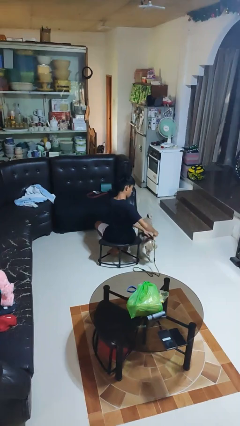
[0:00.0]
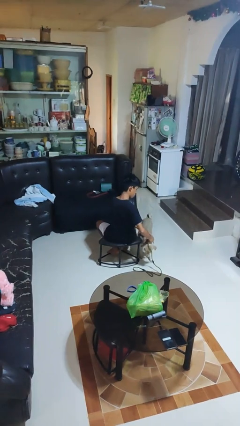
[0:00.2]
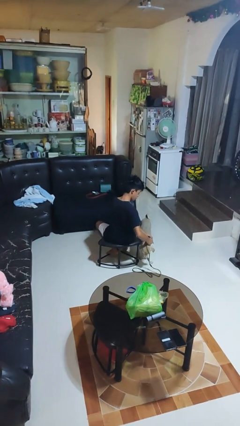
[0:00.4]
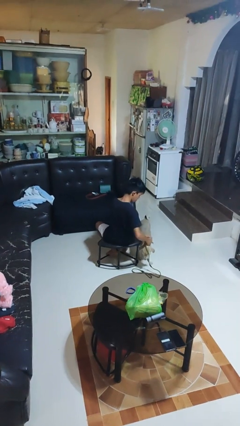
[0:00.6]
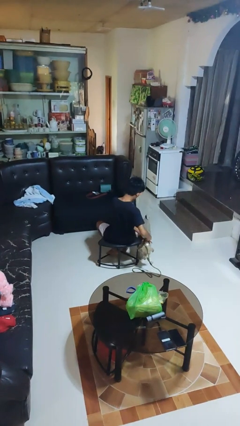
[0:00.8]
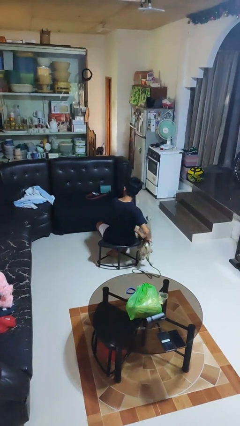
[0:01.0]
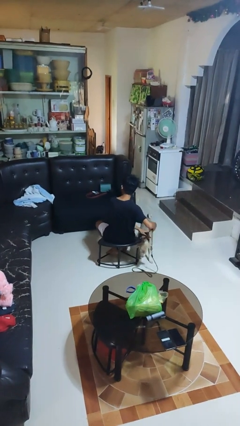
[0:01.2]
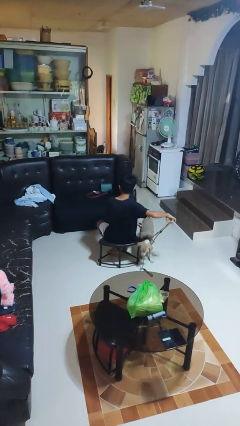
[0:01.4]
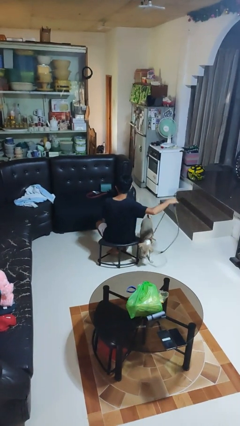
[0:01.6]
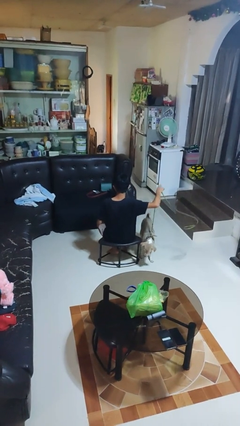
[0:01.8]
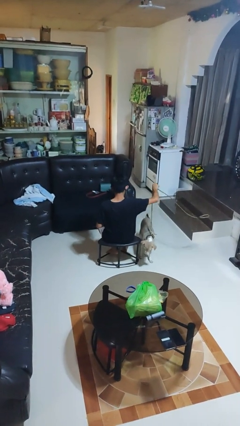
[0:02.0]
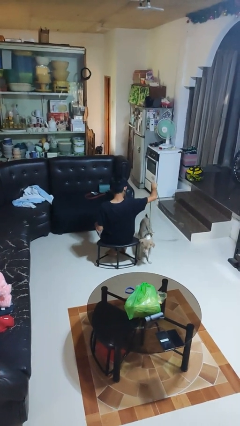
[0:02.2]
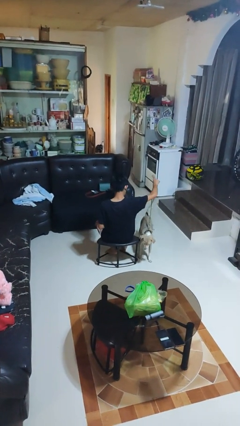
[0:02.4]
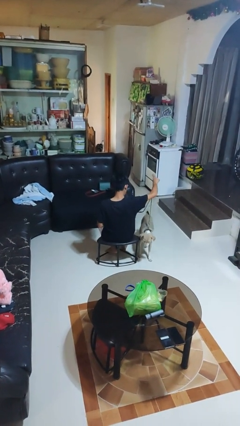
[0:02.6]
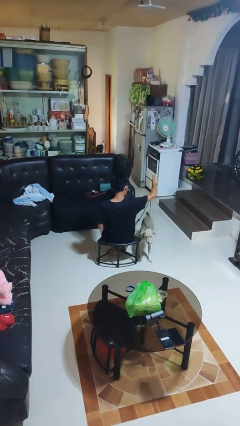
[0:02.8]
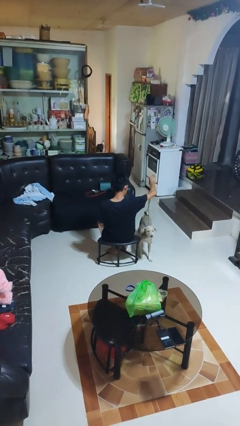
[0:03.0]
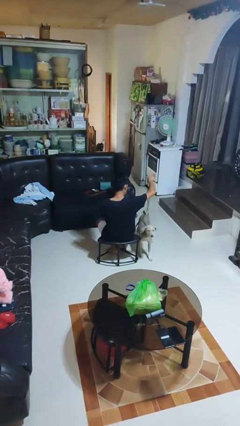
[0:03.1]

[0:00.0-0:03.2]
person attaches leash to dog

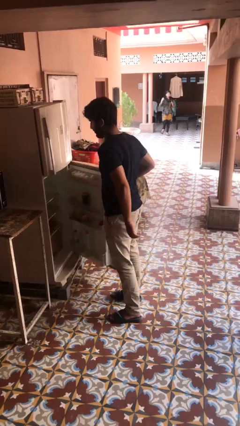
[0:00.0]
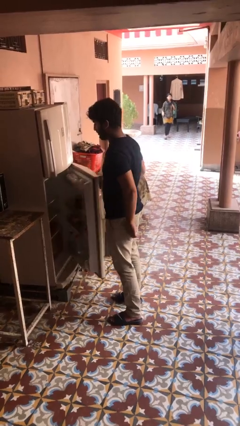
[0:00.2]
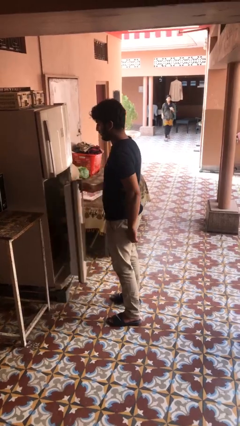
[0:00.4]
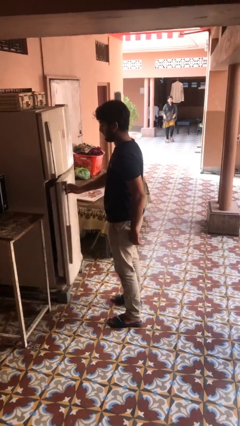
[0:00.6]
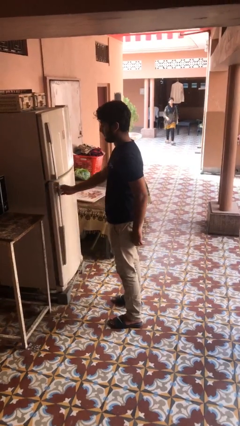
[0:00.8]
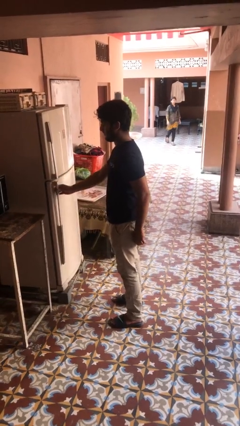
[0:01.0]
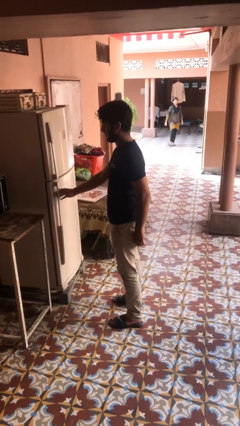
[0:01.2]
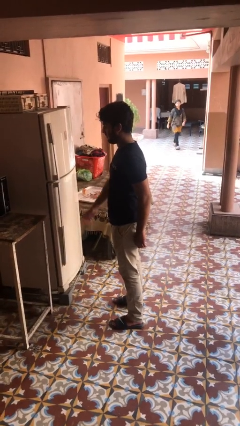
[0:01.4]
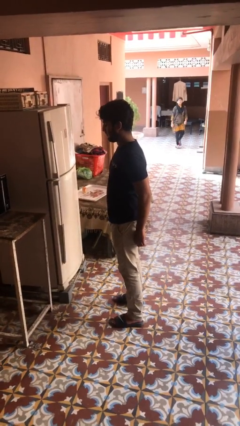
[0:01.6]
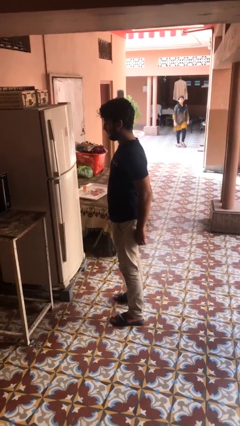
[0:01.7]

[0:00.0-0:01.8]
person closes refrigerator

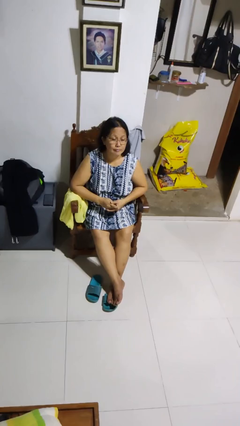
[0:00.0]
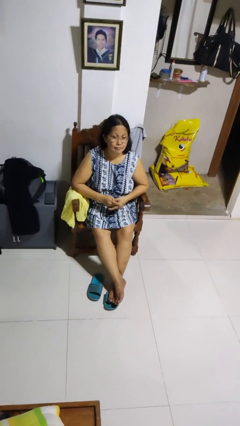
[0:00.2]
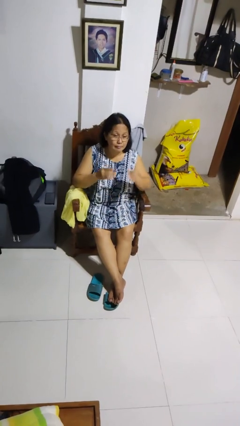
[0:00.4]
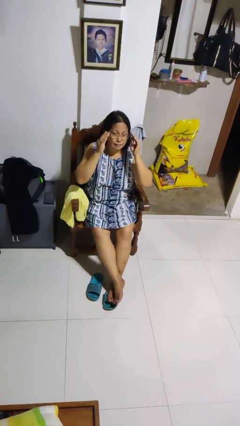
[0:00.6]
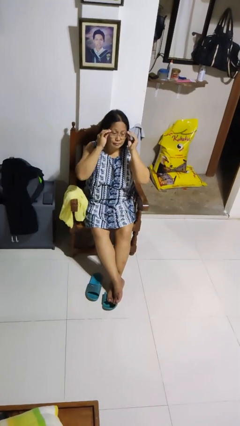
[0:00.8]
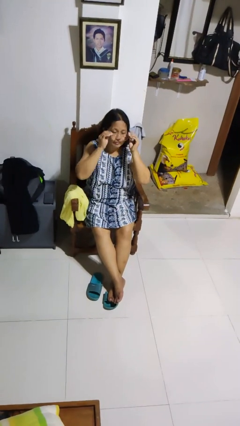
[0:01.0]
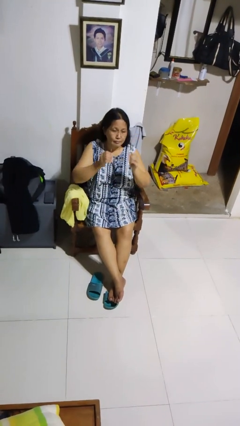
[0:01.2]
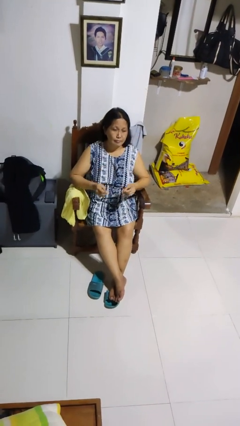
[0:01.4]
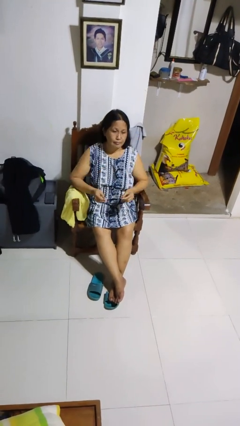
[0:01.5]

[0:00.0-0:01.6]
person takes off glasses

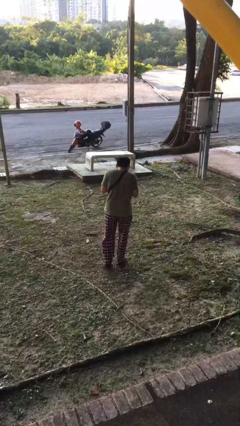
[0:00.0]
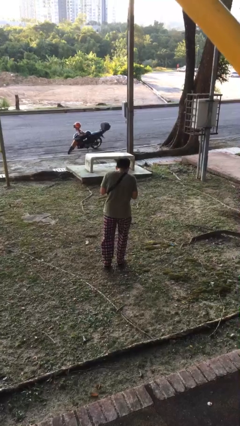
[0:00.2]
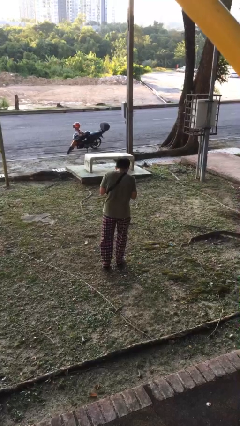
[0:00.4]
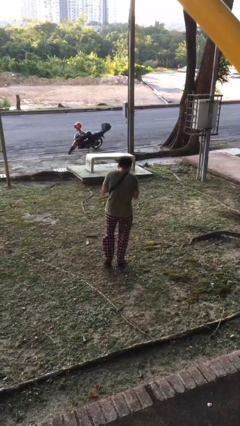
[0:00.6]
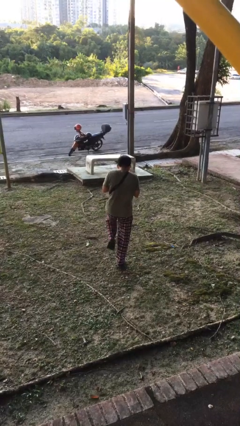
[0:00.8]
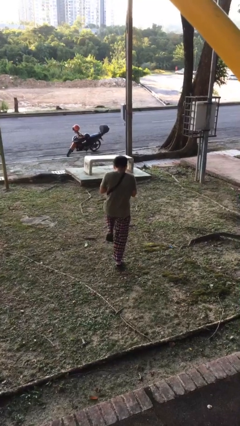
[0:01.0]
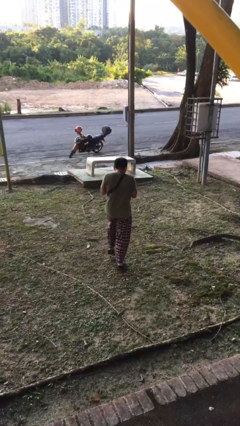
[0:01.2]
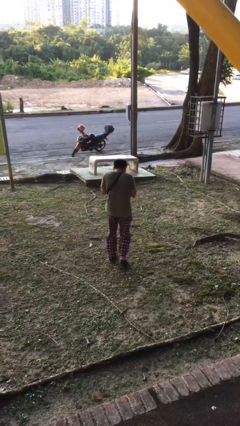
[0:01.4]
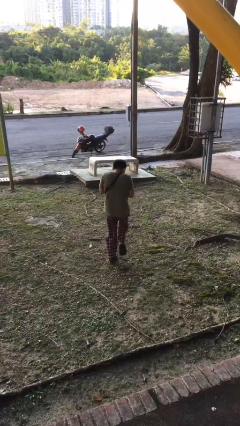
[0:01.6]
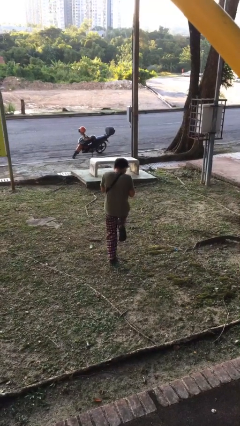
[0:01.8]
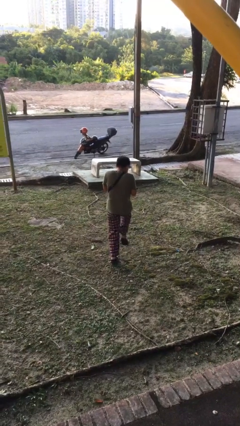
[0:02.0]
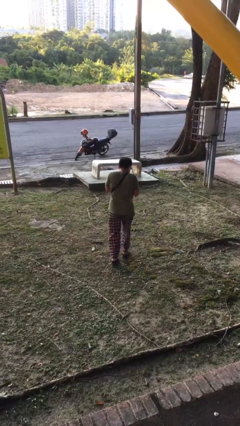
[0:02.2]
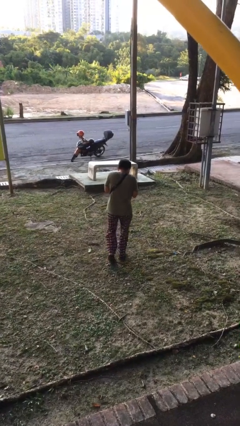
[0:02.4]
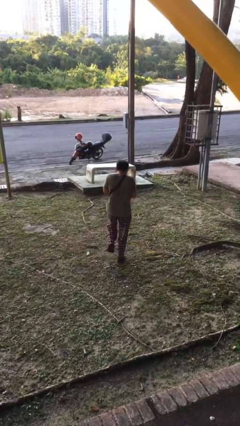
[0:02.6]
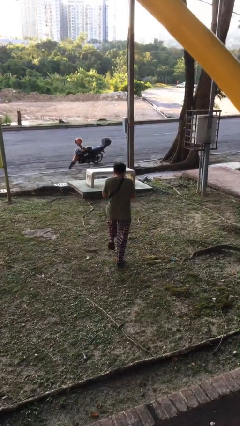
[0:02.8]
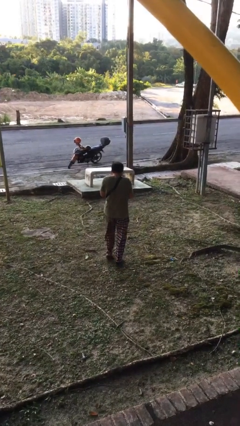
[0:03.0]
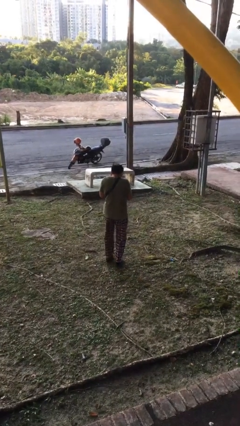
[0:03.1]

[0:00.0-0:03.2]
person walks tiptoe

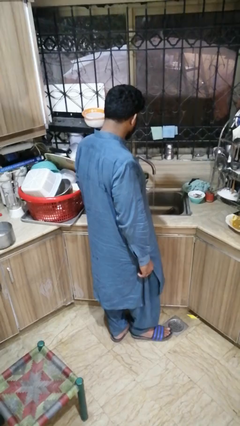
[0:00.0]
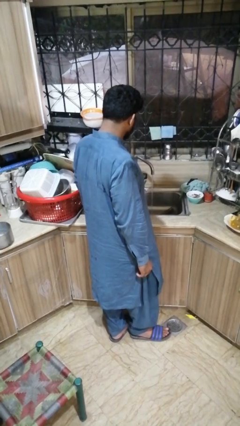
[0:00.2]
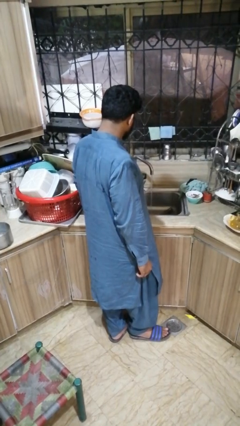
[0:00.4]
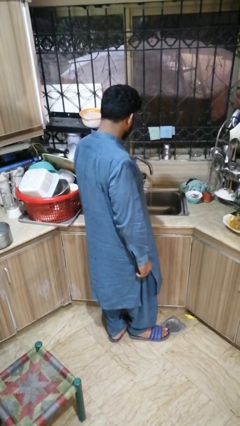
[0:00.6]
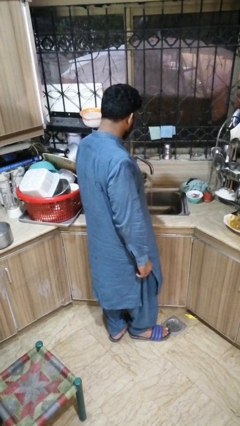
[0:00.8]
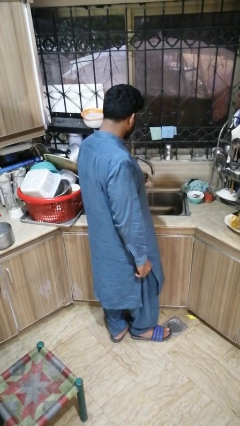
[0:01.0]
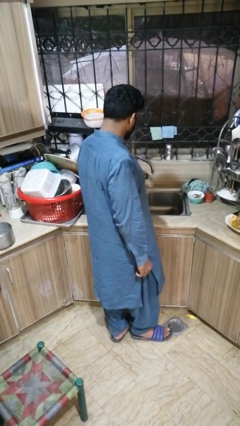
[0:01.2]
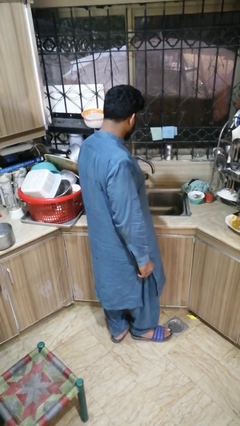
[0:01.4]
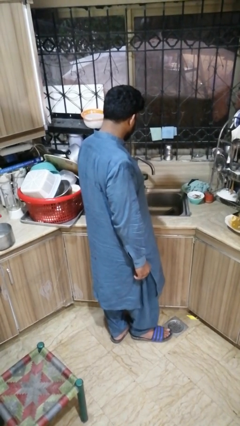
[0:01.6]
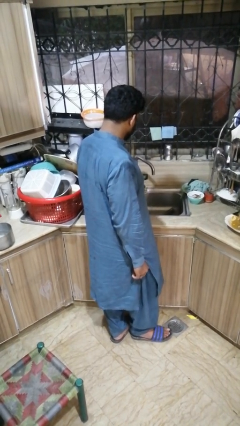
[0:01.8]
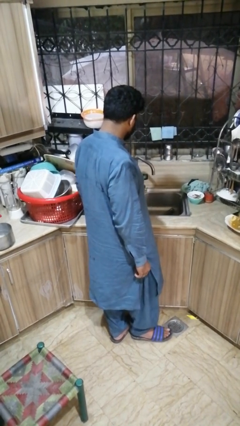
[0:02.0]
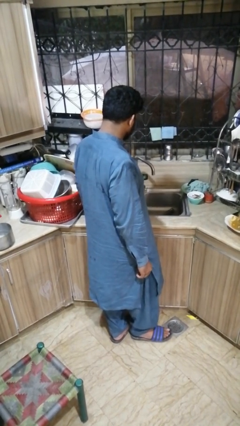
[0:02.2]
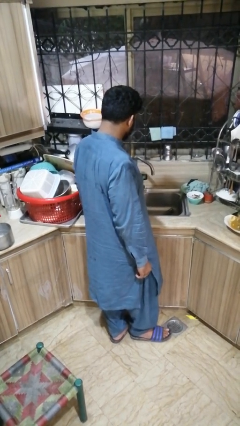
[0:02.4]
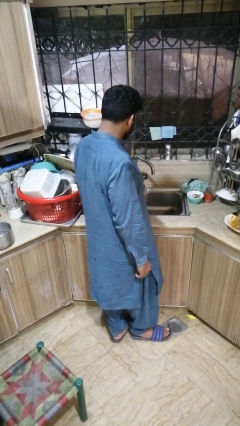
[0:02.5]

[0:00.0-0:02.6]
person turns off faucet

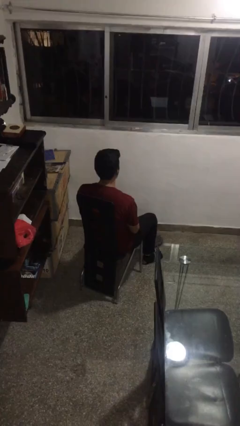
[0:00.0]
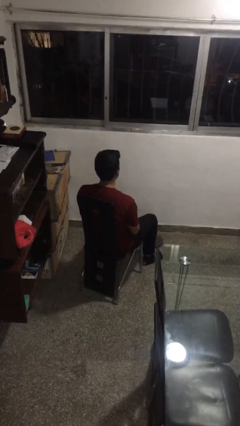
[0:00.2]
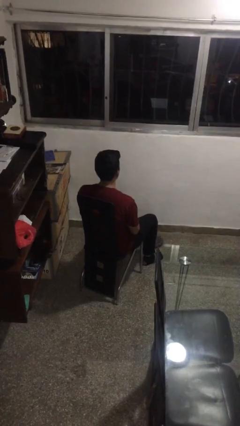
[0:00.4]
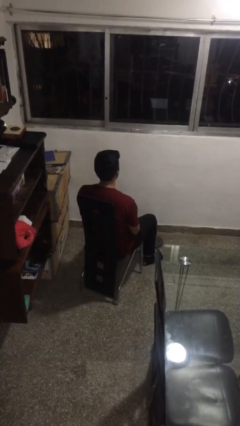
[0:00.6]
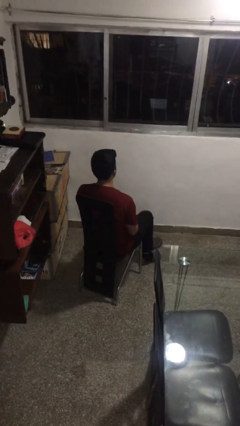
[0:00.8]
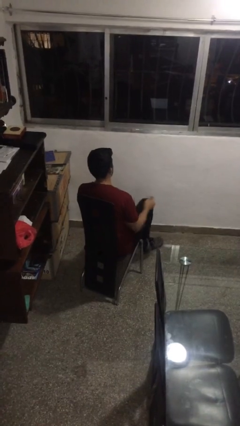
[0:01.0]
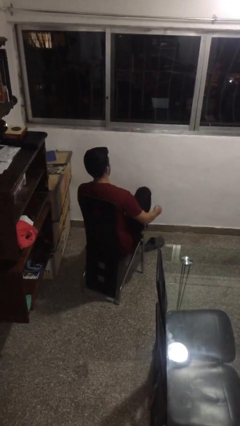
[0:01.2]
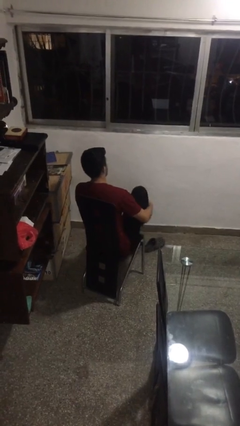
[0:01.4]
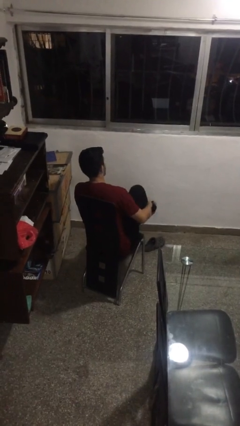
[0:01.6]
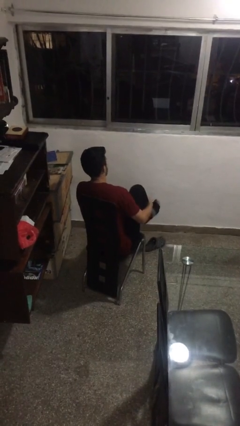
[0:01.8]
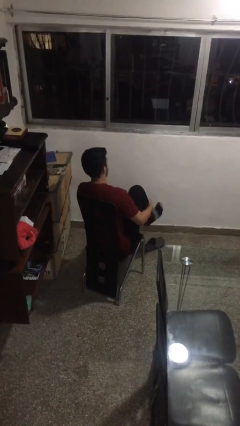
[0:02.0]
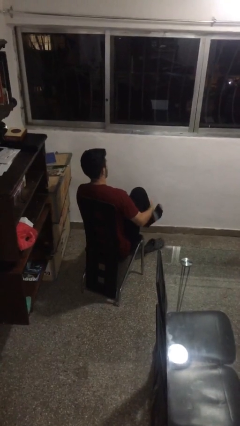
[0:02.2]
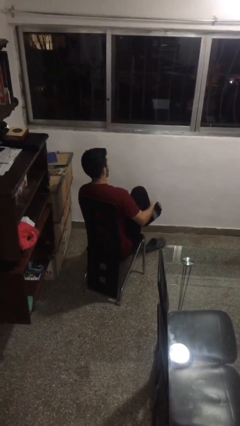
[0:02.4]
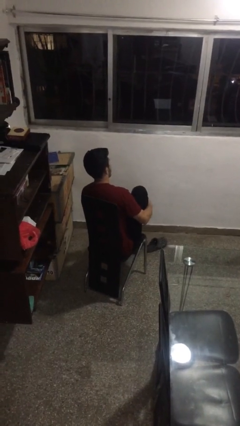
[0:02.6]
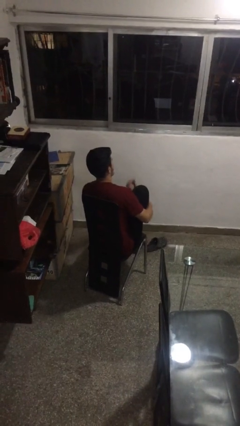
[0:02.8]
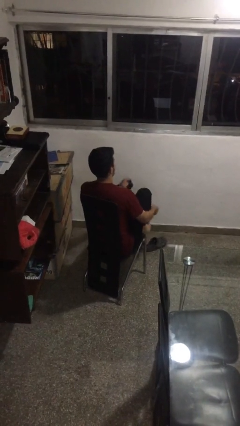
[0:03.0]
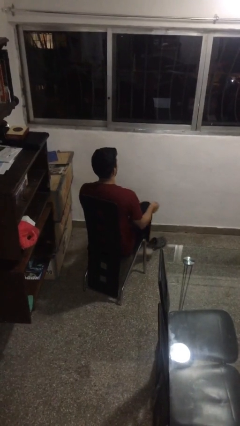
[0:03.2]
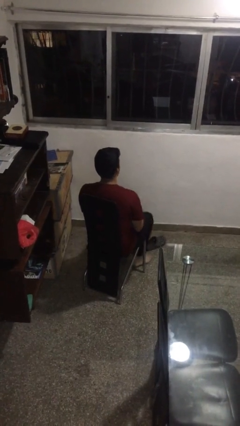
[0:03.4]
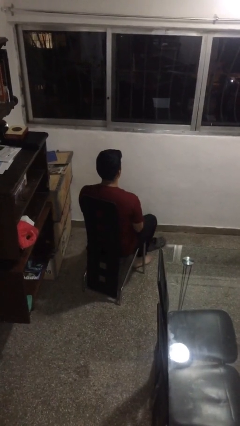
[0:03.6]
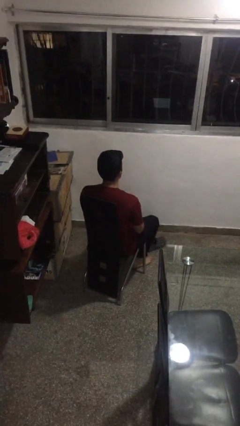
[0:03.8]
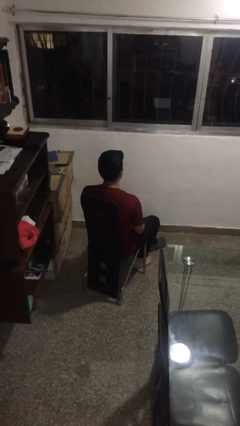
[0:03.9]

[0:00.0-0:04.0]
person takes off socks

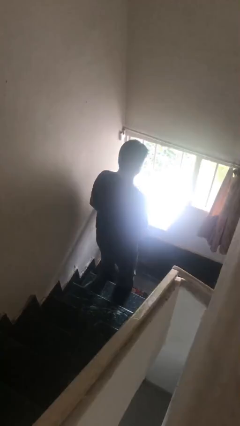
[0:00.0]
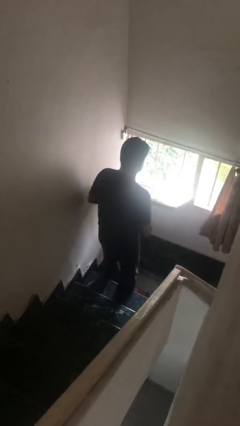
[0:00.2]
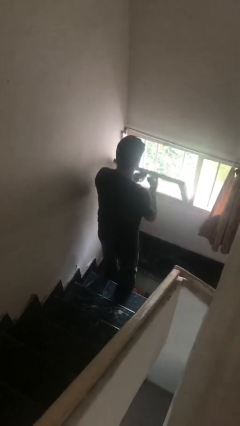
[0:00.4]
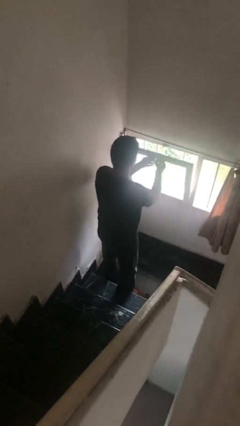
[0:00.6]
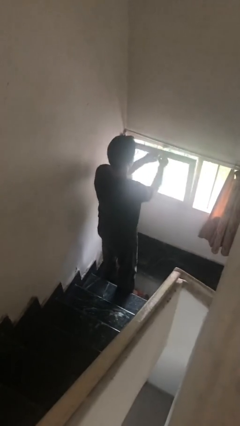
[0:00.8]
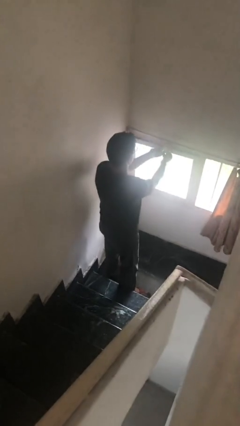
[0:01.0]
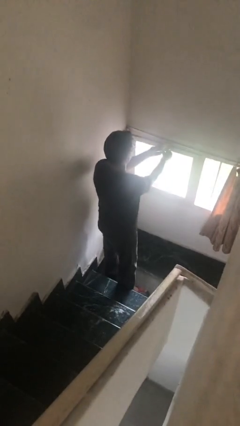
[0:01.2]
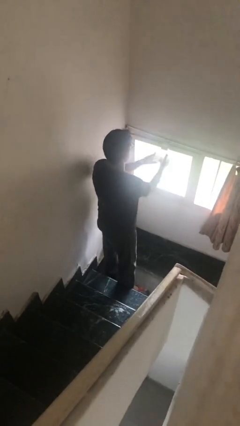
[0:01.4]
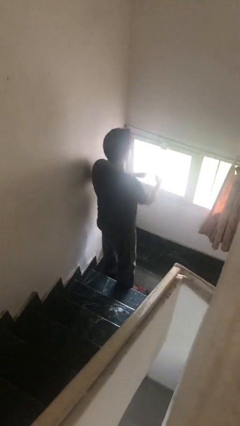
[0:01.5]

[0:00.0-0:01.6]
person closes home window
